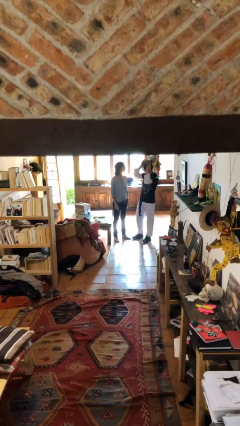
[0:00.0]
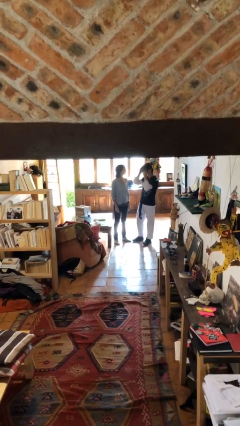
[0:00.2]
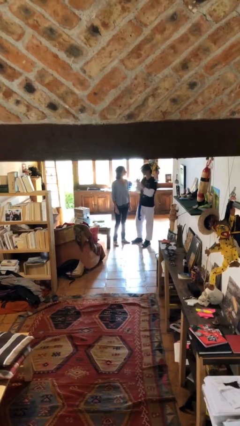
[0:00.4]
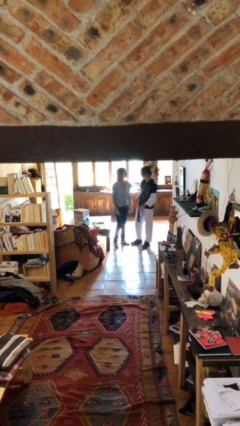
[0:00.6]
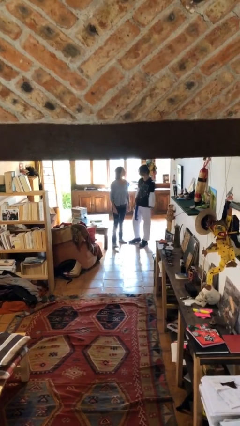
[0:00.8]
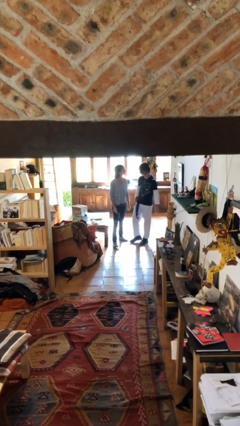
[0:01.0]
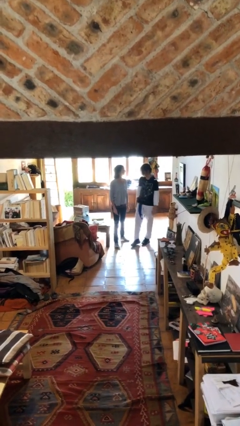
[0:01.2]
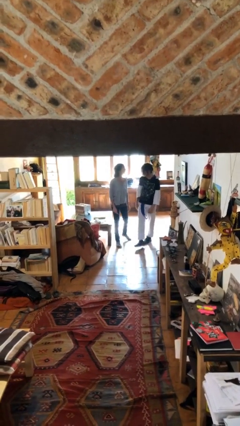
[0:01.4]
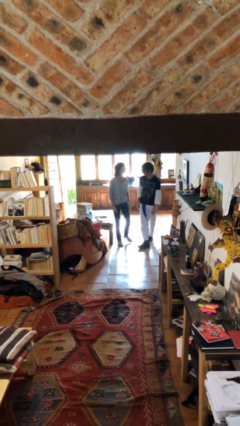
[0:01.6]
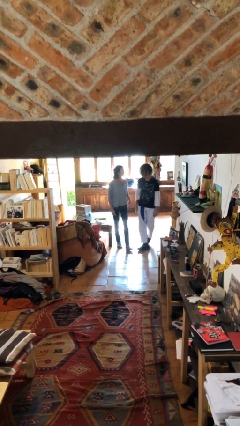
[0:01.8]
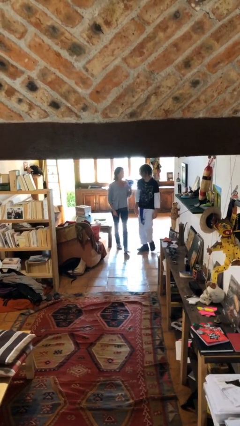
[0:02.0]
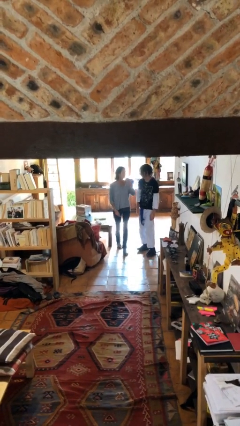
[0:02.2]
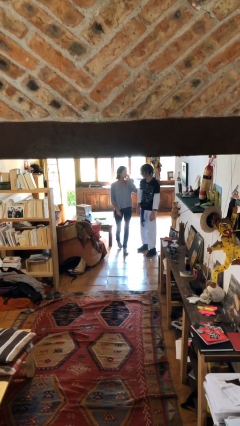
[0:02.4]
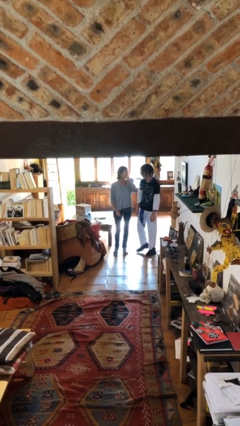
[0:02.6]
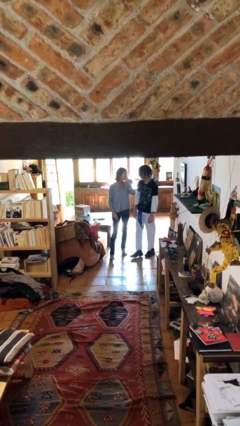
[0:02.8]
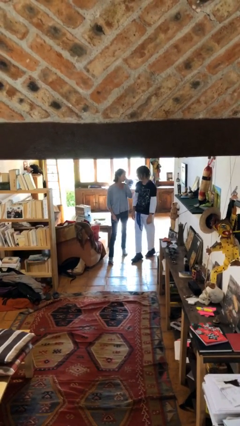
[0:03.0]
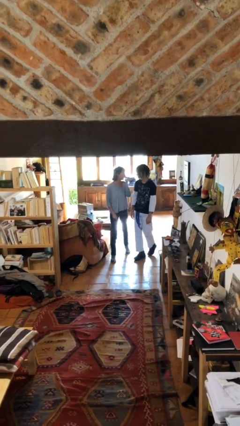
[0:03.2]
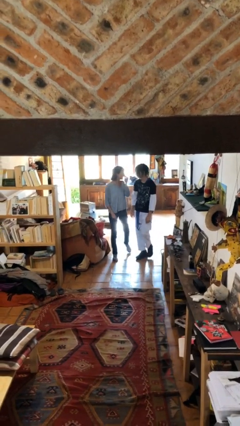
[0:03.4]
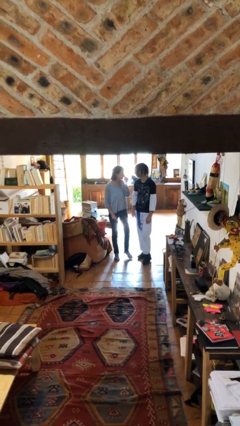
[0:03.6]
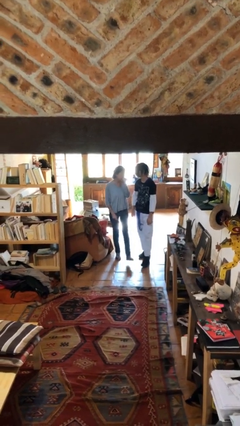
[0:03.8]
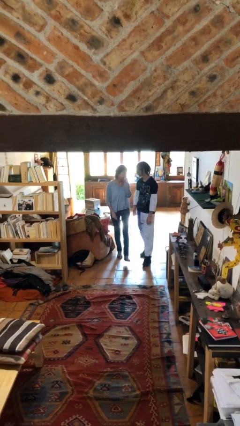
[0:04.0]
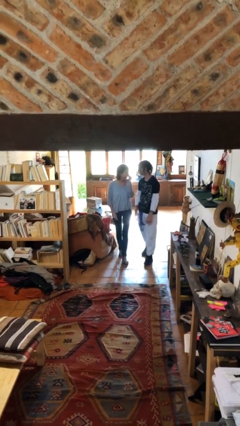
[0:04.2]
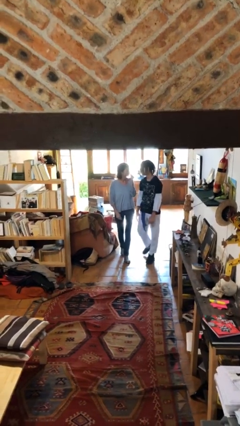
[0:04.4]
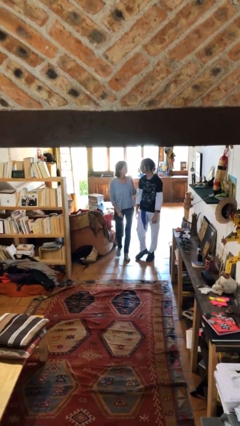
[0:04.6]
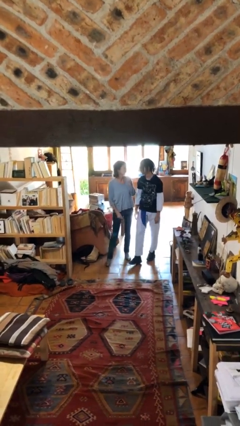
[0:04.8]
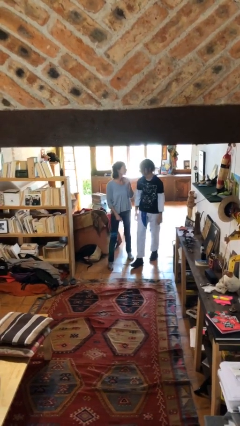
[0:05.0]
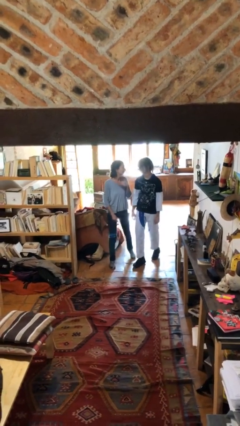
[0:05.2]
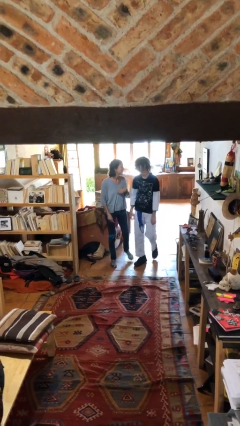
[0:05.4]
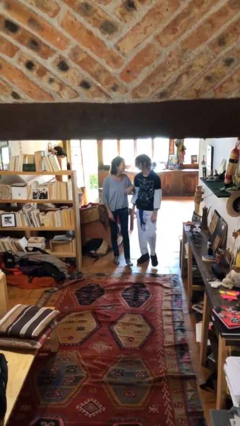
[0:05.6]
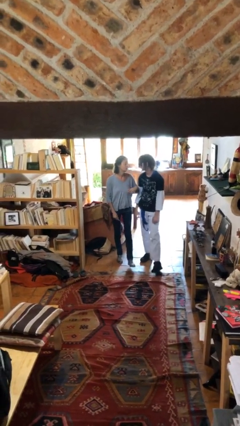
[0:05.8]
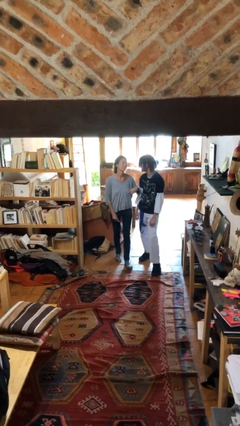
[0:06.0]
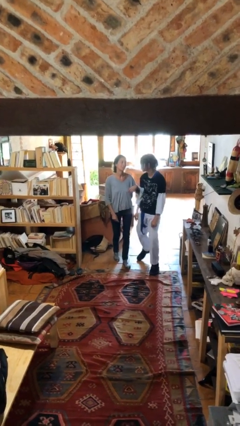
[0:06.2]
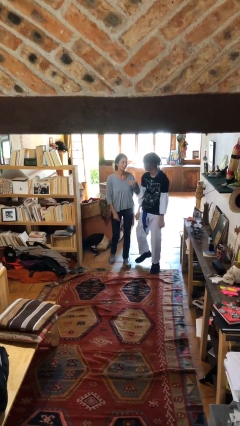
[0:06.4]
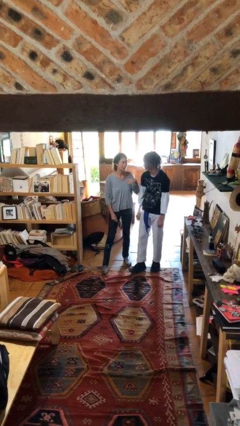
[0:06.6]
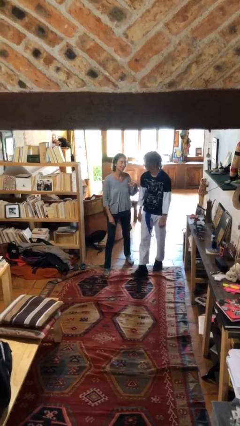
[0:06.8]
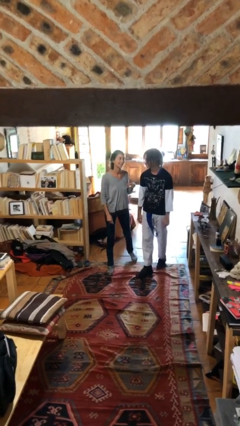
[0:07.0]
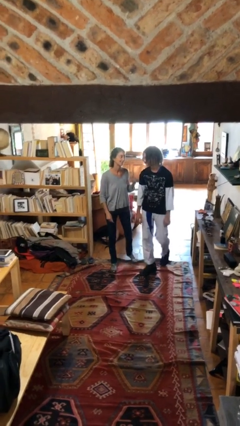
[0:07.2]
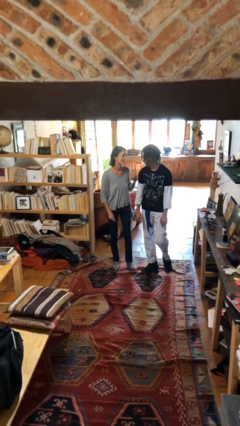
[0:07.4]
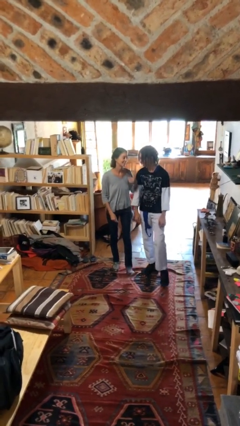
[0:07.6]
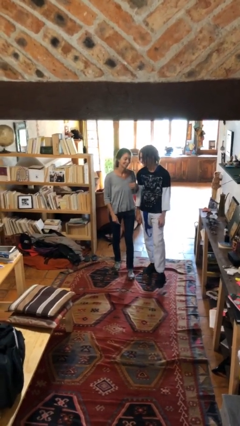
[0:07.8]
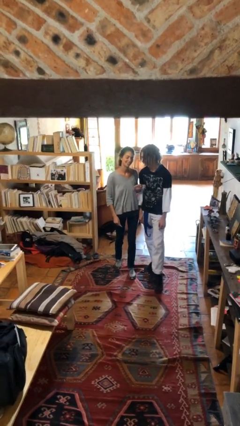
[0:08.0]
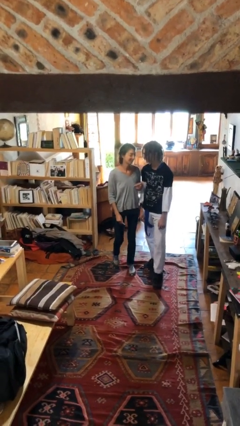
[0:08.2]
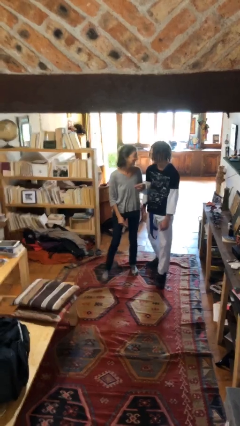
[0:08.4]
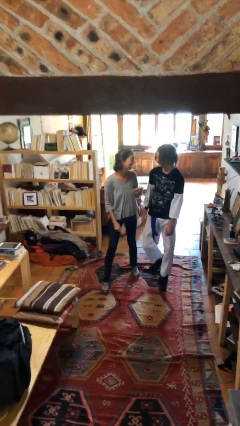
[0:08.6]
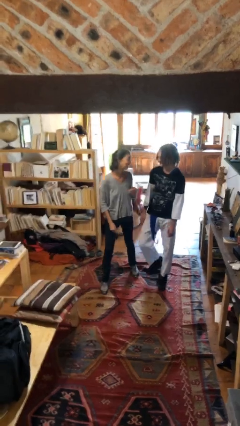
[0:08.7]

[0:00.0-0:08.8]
person talks to person

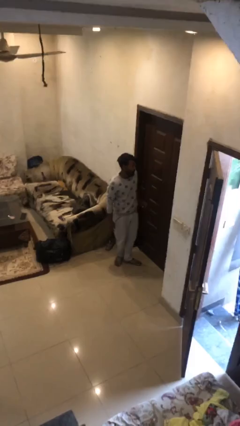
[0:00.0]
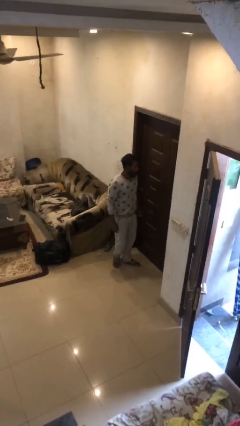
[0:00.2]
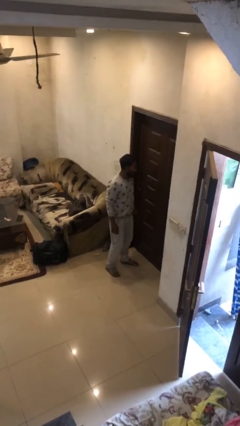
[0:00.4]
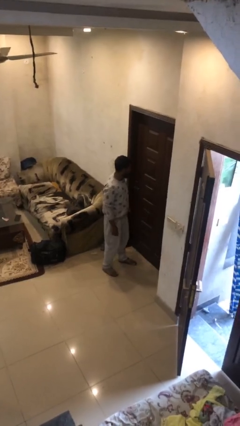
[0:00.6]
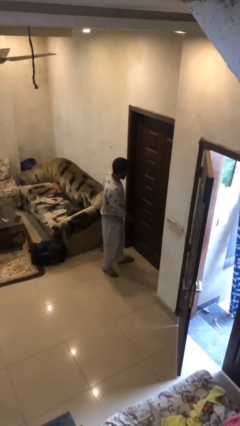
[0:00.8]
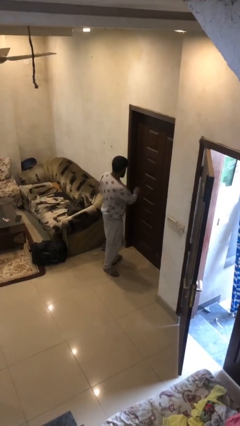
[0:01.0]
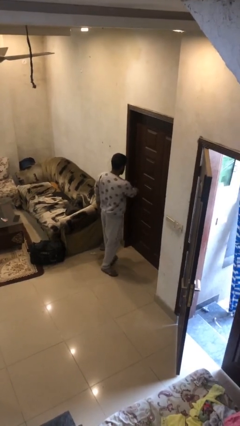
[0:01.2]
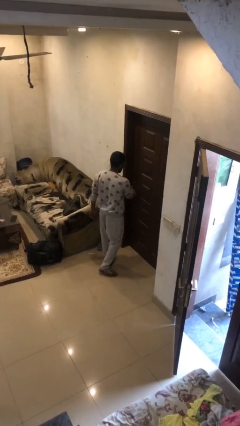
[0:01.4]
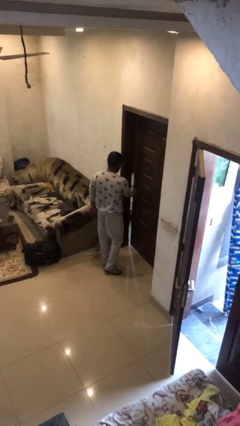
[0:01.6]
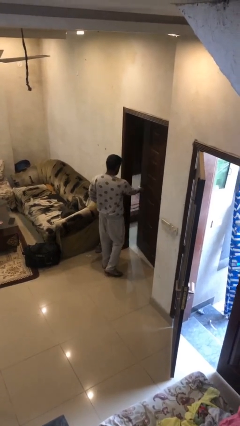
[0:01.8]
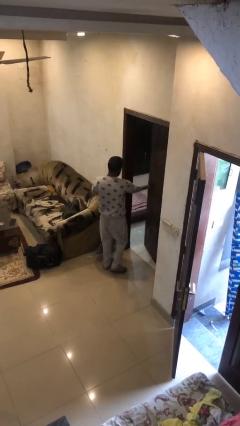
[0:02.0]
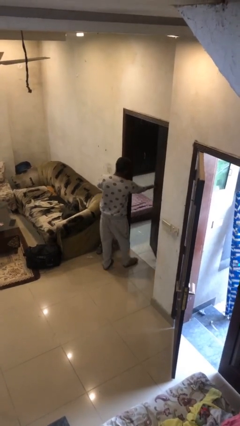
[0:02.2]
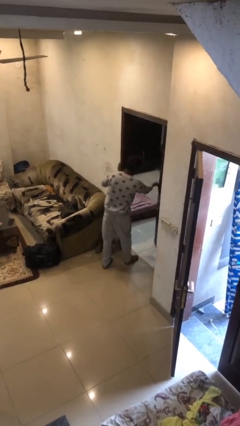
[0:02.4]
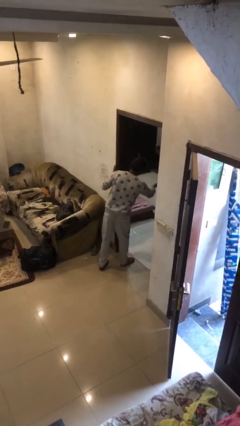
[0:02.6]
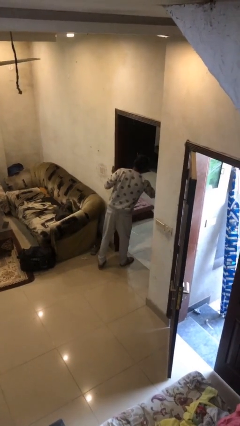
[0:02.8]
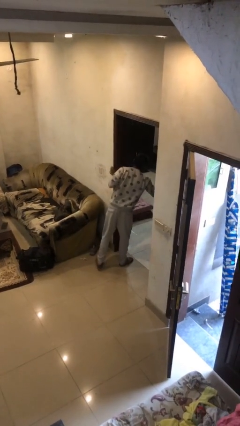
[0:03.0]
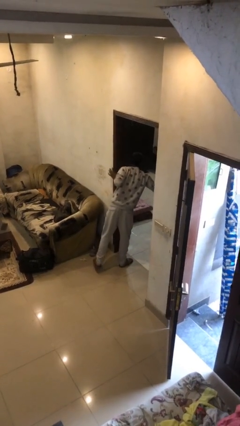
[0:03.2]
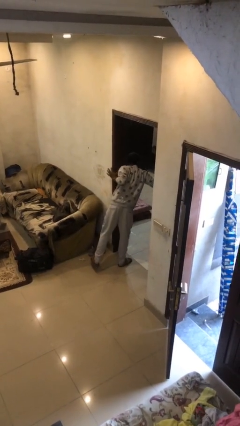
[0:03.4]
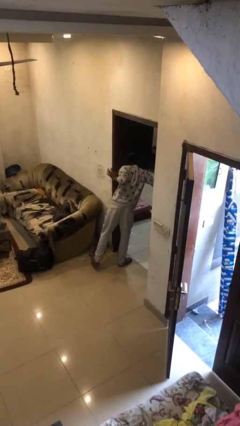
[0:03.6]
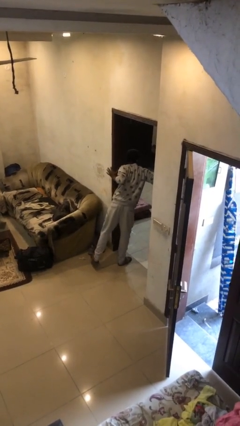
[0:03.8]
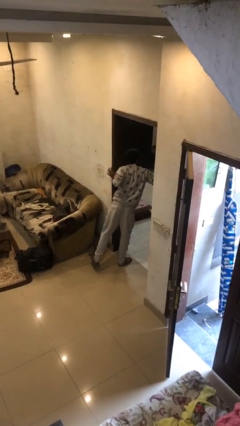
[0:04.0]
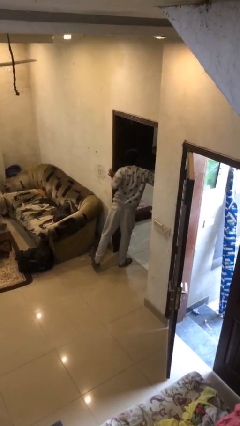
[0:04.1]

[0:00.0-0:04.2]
person opens facility door

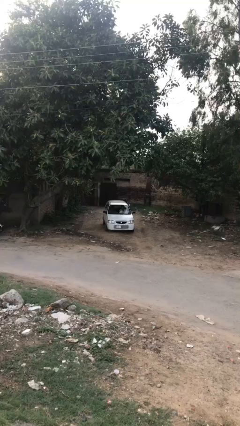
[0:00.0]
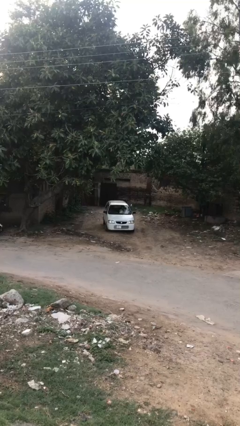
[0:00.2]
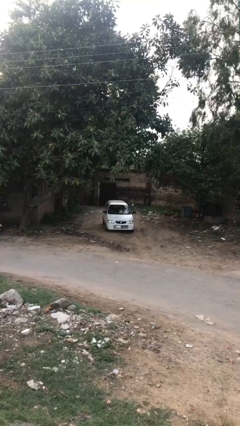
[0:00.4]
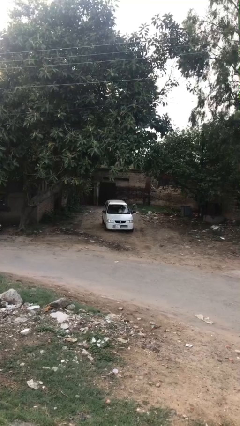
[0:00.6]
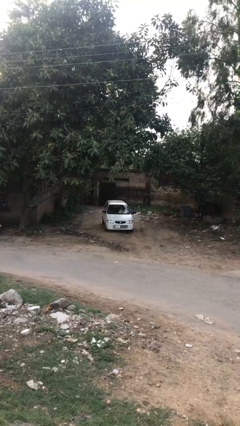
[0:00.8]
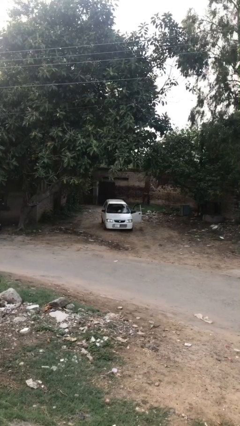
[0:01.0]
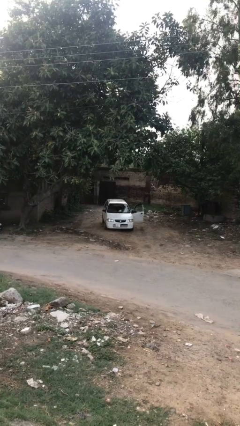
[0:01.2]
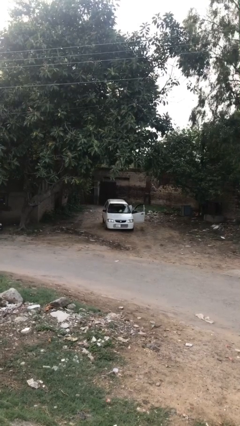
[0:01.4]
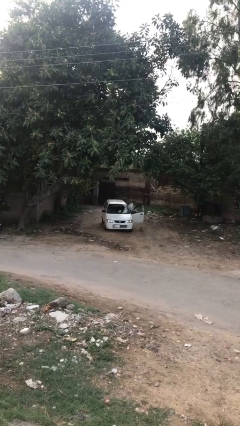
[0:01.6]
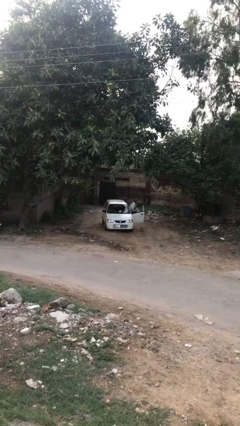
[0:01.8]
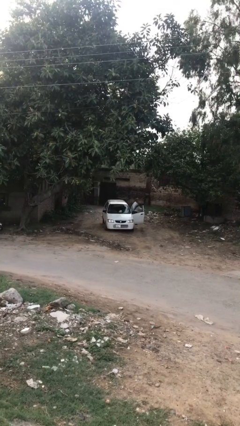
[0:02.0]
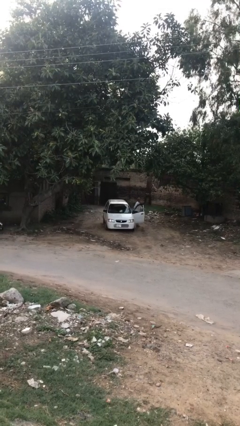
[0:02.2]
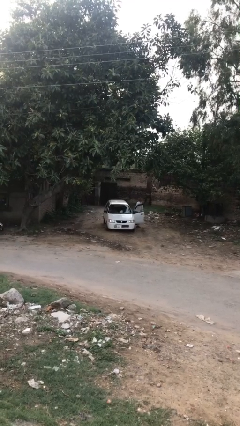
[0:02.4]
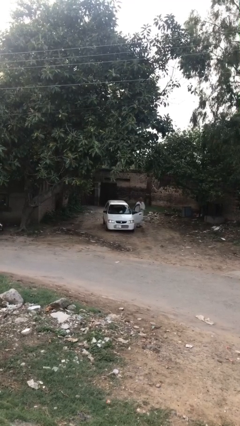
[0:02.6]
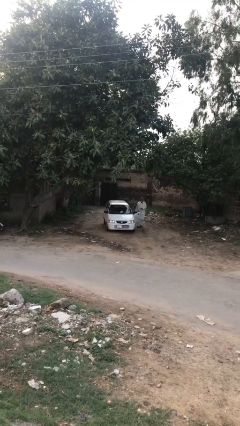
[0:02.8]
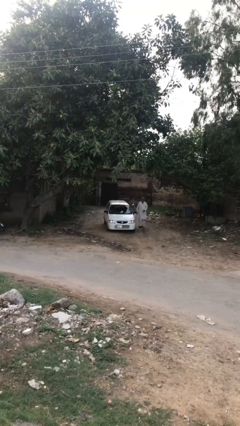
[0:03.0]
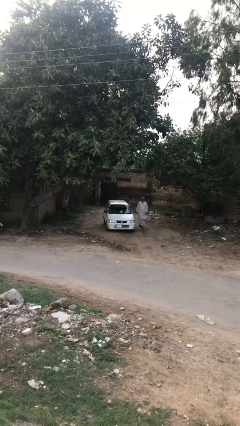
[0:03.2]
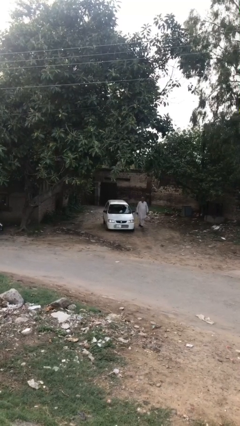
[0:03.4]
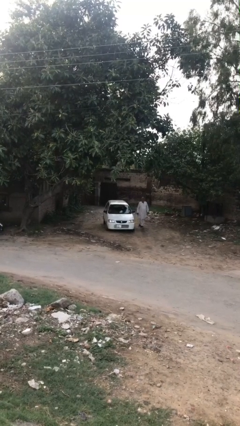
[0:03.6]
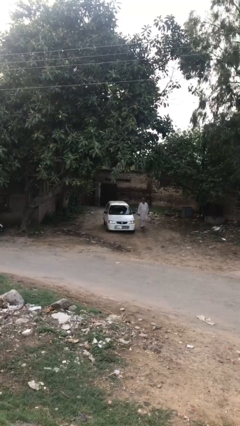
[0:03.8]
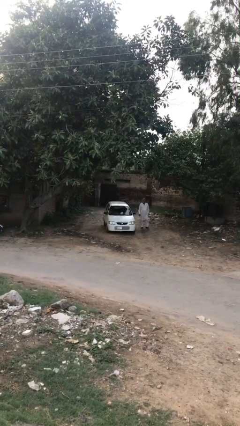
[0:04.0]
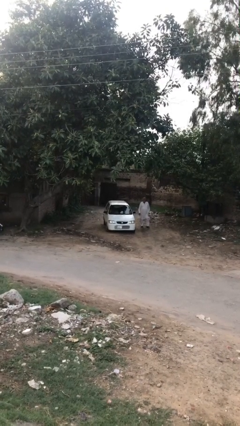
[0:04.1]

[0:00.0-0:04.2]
car drops off person

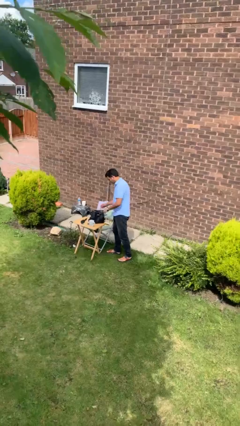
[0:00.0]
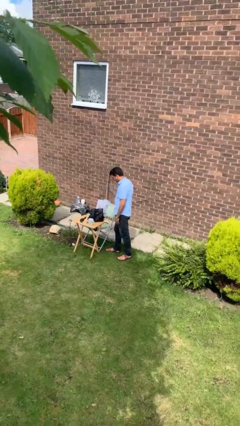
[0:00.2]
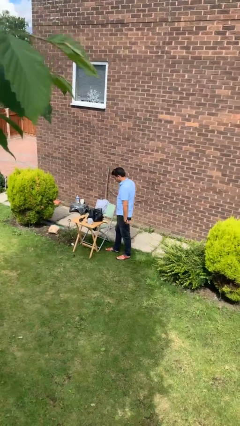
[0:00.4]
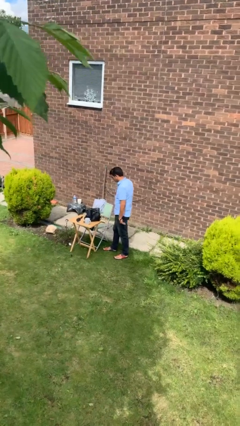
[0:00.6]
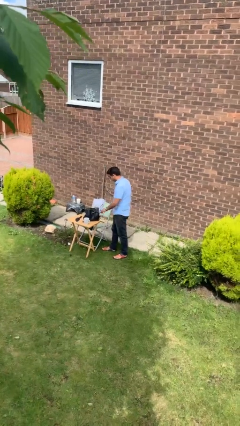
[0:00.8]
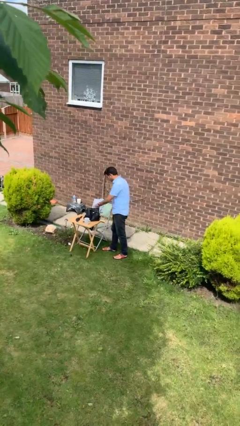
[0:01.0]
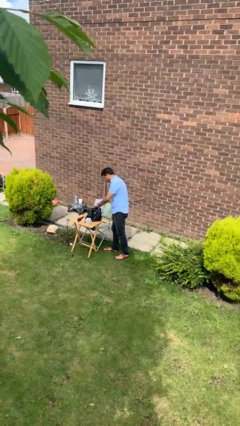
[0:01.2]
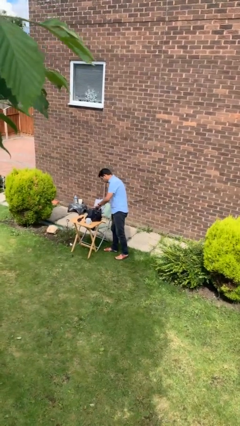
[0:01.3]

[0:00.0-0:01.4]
person searches in backpack
